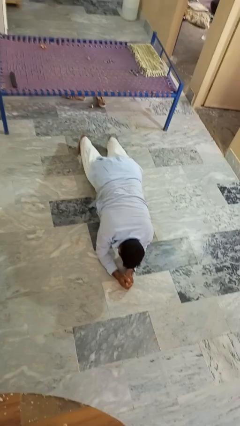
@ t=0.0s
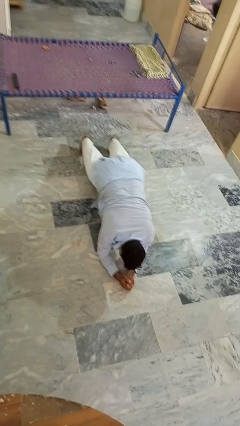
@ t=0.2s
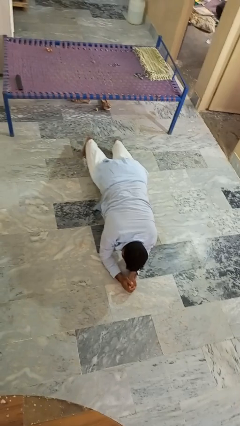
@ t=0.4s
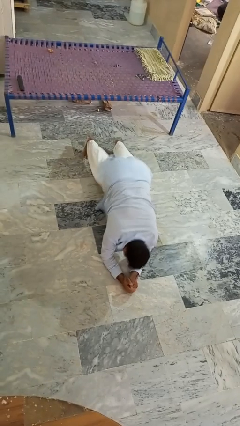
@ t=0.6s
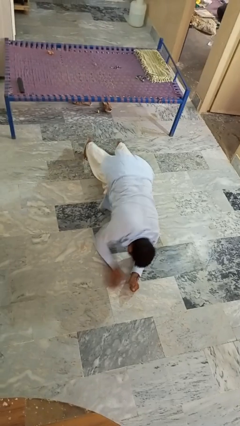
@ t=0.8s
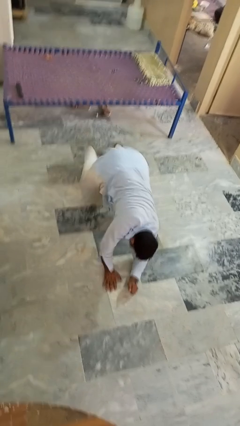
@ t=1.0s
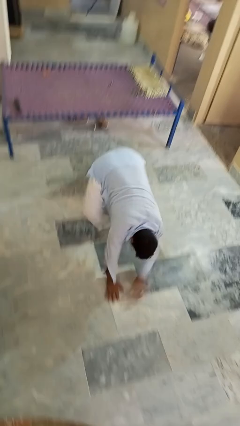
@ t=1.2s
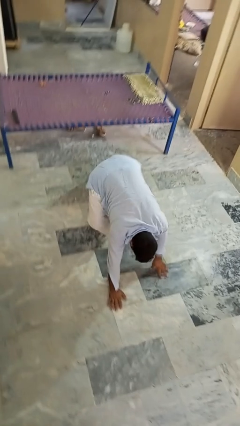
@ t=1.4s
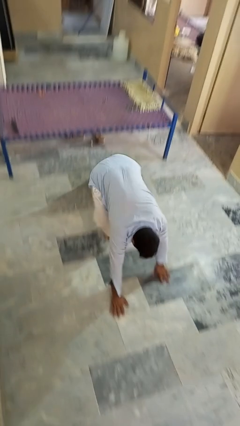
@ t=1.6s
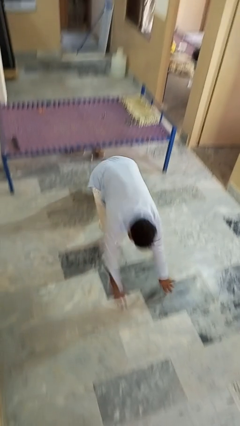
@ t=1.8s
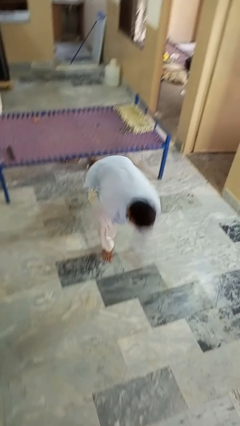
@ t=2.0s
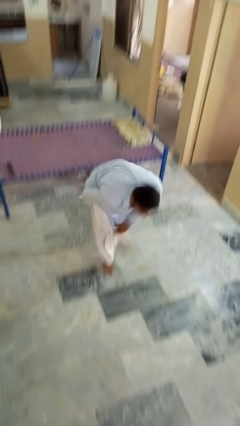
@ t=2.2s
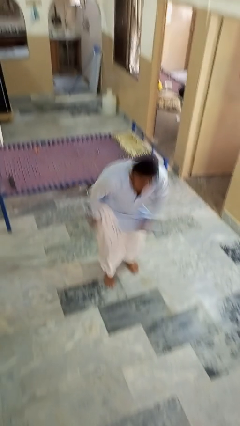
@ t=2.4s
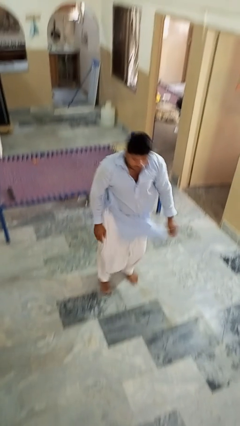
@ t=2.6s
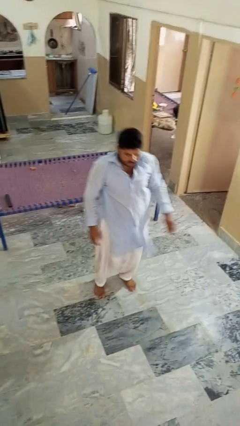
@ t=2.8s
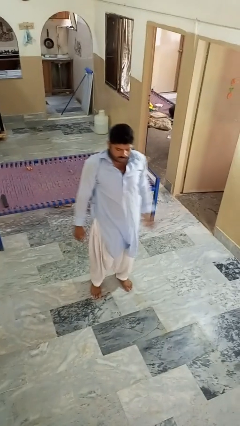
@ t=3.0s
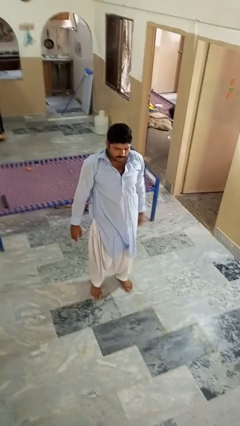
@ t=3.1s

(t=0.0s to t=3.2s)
person stands up from floor

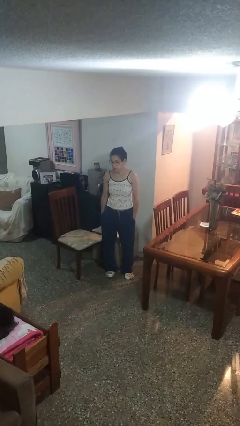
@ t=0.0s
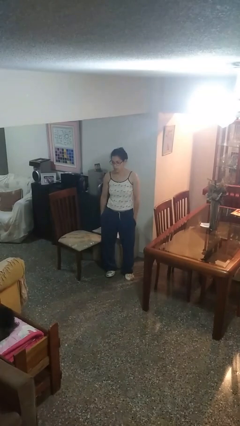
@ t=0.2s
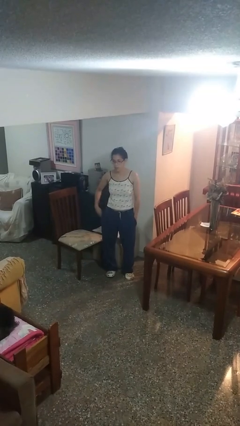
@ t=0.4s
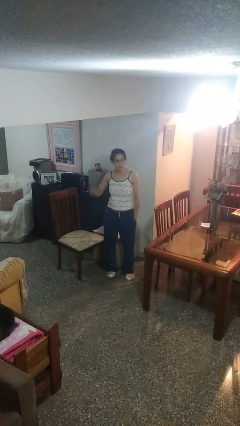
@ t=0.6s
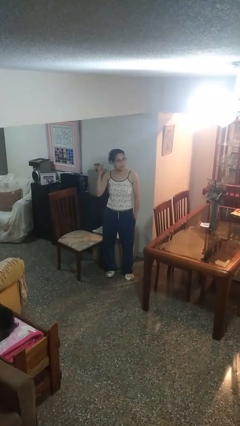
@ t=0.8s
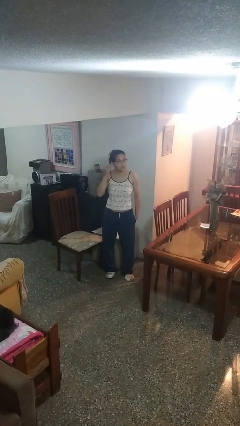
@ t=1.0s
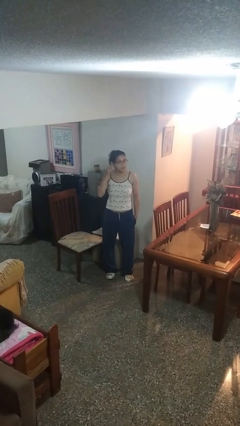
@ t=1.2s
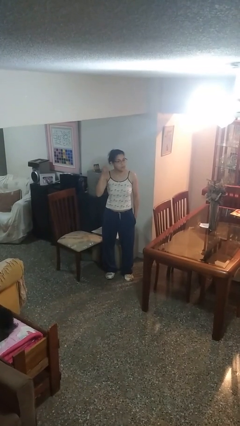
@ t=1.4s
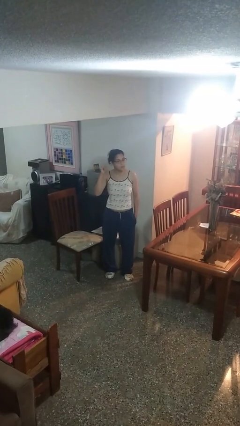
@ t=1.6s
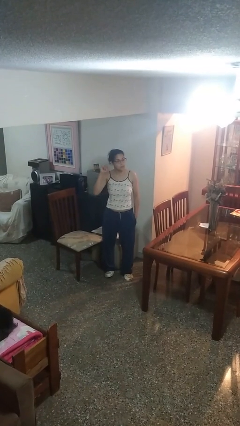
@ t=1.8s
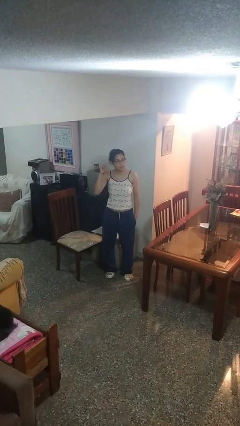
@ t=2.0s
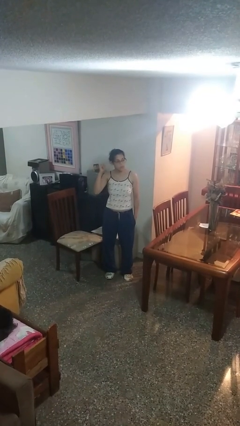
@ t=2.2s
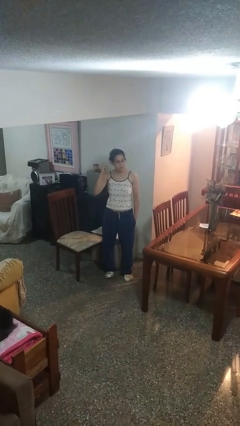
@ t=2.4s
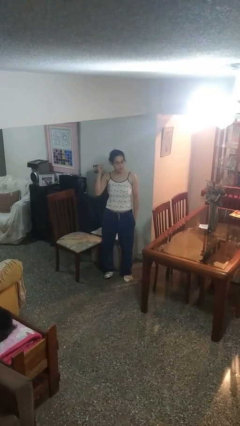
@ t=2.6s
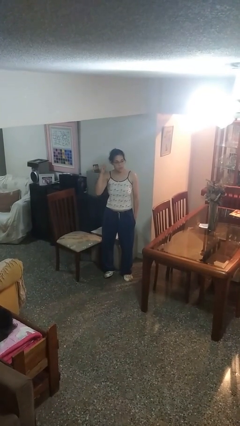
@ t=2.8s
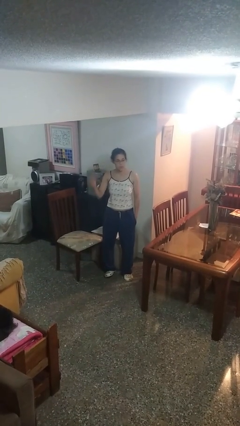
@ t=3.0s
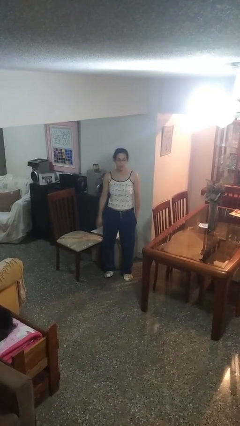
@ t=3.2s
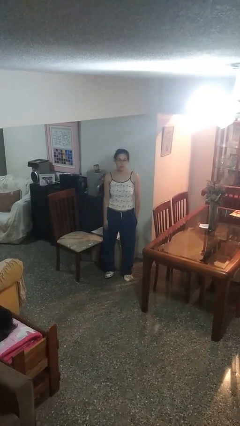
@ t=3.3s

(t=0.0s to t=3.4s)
person gestures listen closely

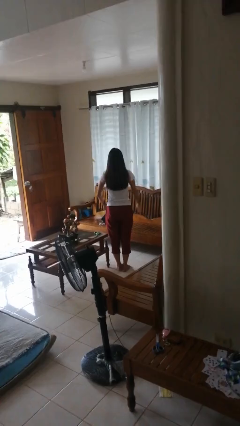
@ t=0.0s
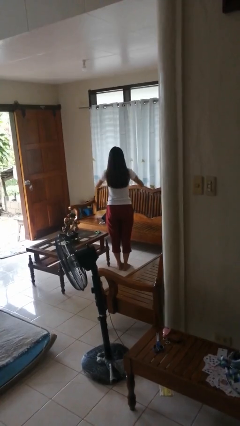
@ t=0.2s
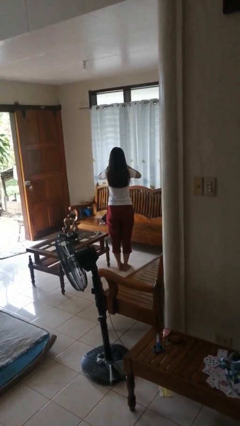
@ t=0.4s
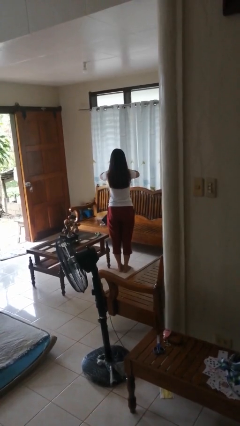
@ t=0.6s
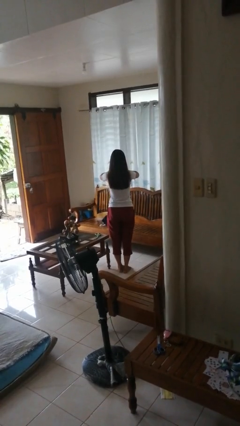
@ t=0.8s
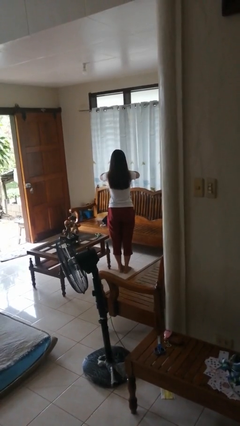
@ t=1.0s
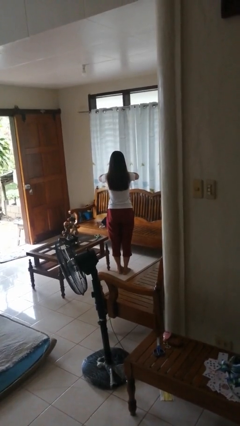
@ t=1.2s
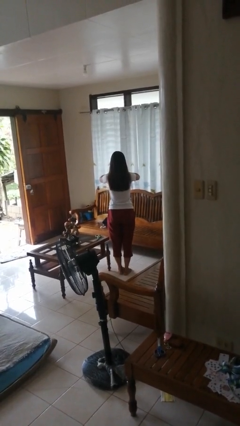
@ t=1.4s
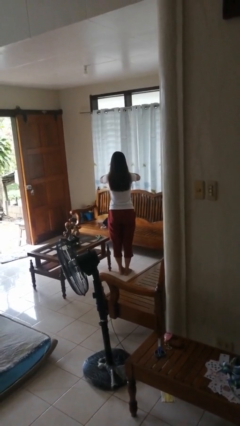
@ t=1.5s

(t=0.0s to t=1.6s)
person covers face with hands

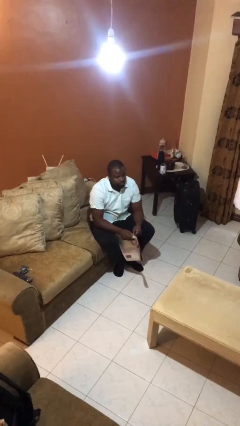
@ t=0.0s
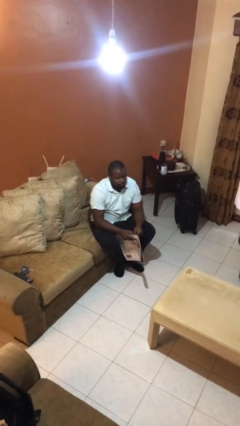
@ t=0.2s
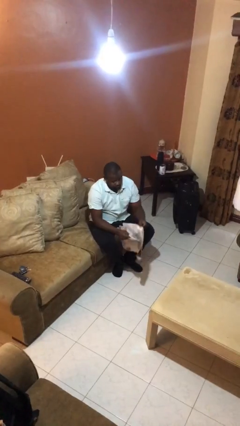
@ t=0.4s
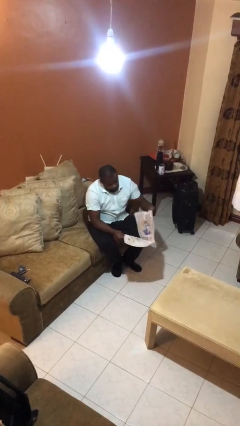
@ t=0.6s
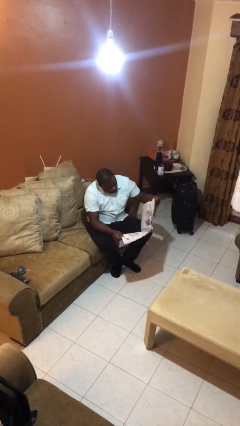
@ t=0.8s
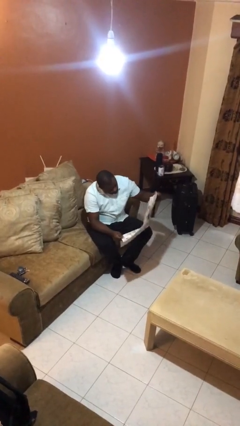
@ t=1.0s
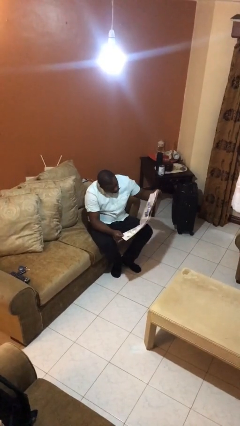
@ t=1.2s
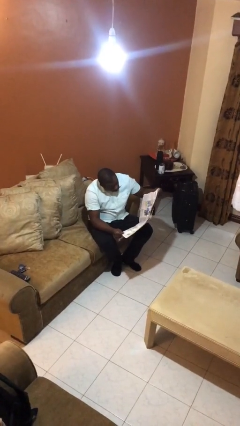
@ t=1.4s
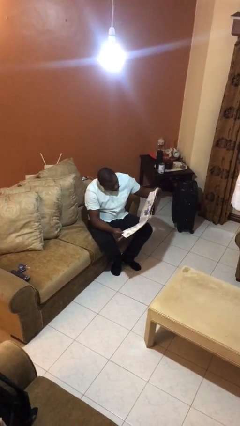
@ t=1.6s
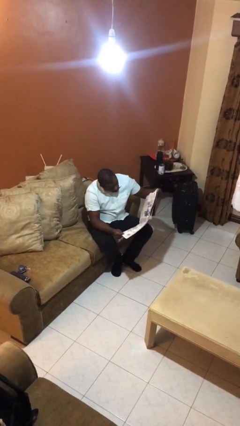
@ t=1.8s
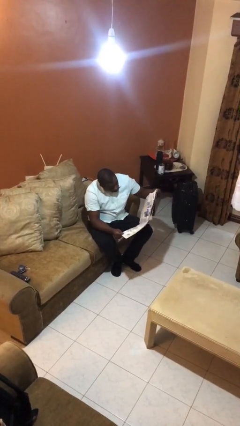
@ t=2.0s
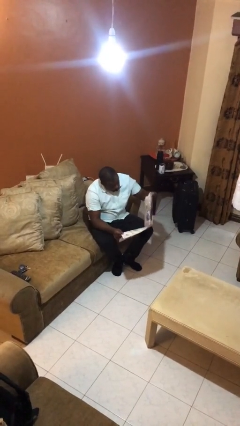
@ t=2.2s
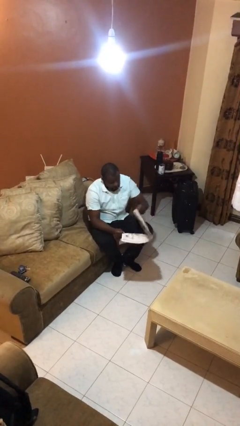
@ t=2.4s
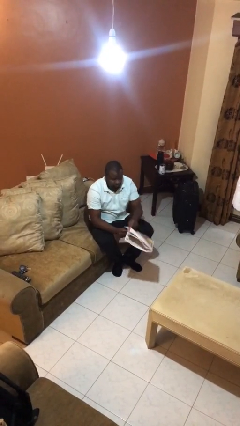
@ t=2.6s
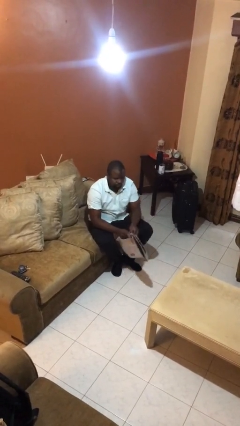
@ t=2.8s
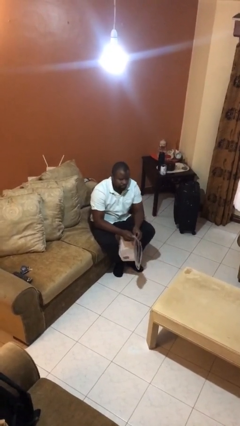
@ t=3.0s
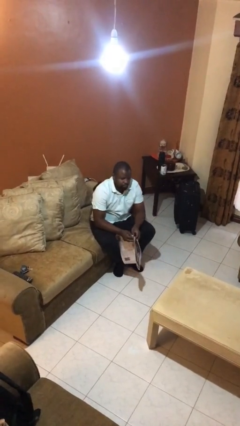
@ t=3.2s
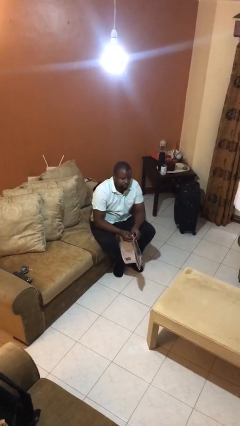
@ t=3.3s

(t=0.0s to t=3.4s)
person reads newspaper

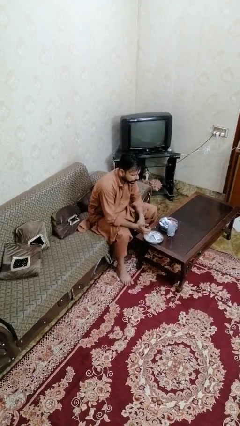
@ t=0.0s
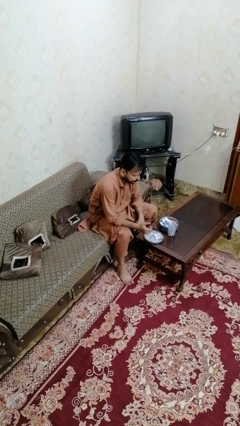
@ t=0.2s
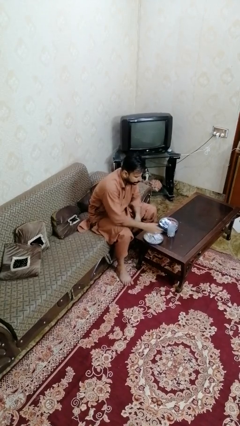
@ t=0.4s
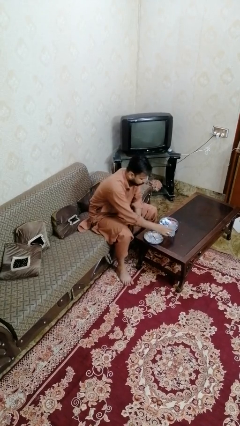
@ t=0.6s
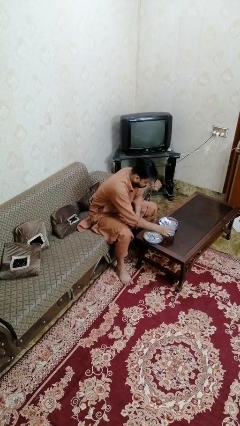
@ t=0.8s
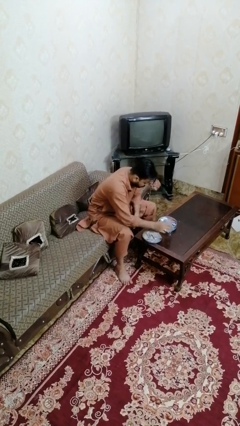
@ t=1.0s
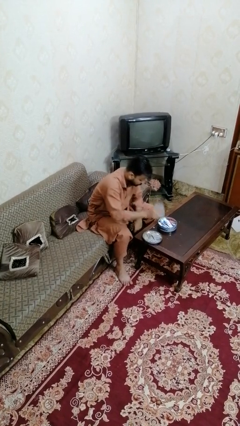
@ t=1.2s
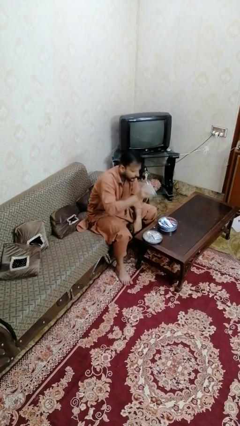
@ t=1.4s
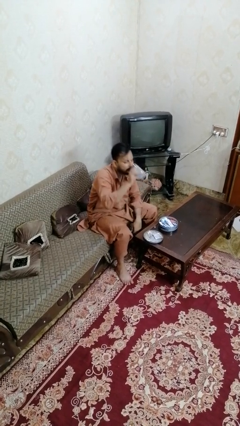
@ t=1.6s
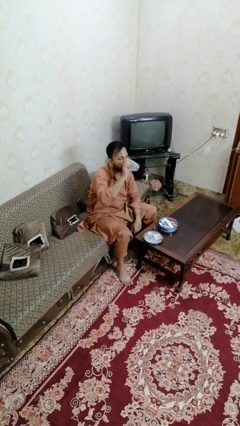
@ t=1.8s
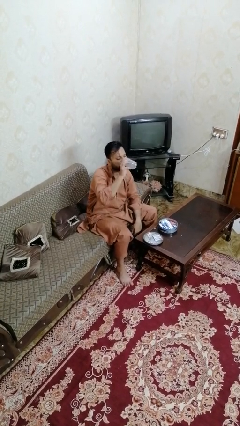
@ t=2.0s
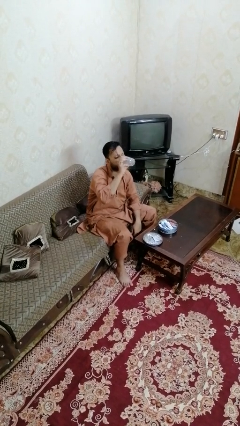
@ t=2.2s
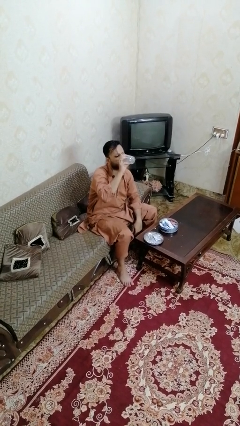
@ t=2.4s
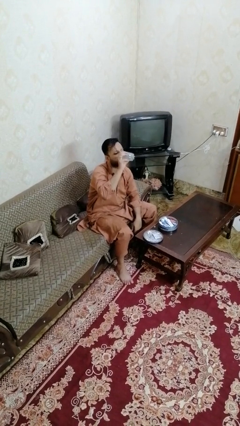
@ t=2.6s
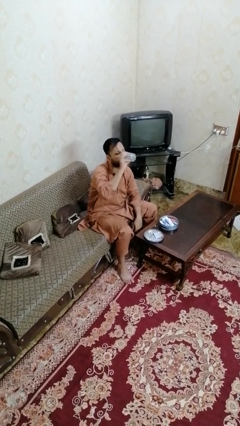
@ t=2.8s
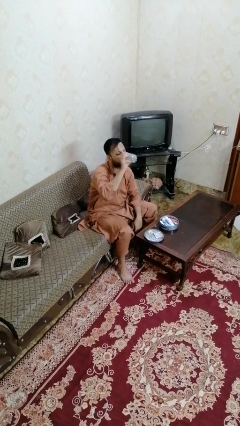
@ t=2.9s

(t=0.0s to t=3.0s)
person drinks from cup

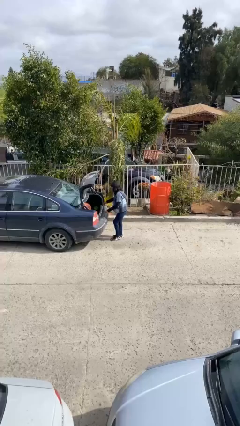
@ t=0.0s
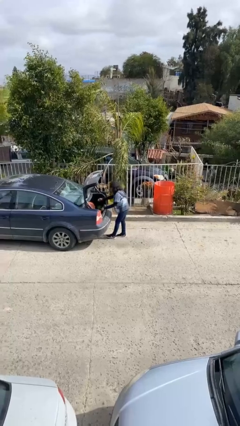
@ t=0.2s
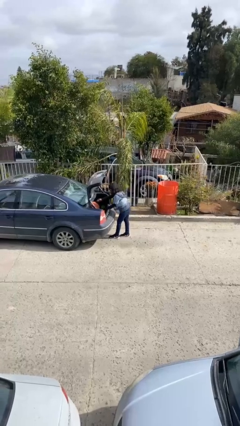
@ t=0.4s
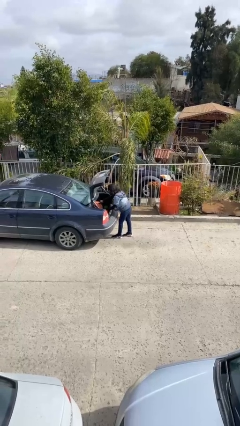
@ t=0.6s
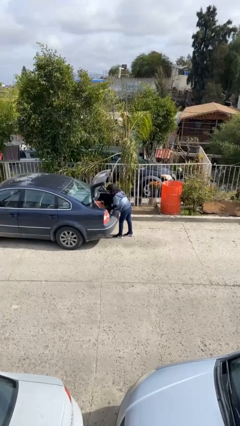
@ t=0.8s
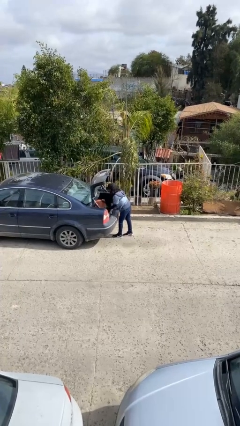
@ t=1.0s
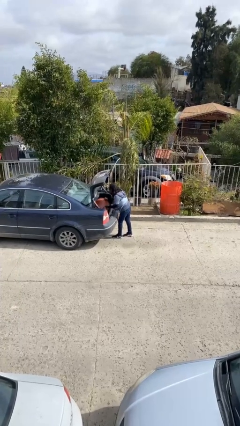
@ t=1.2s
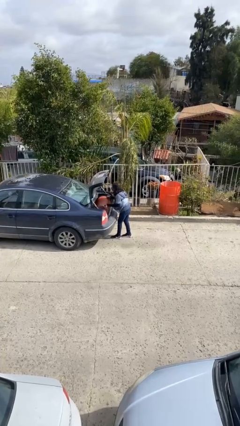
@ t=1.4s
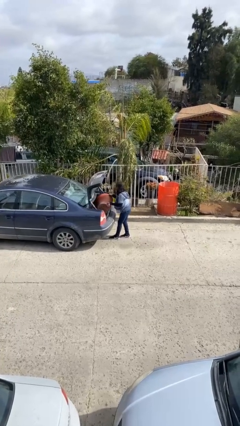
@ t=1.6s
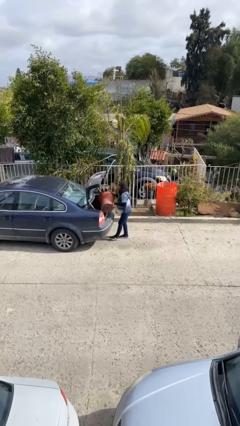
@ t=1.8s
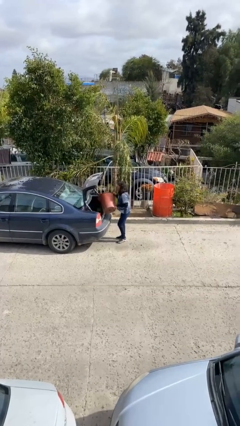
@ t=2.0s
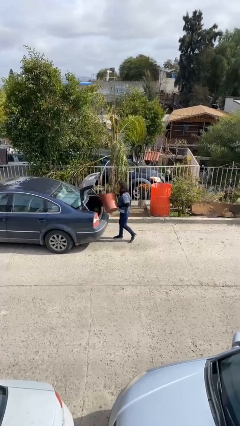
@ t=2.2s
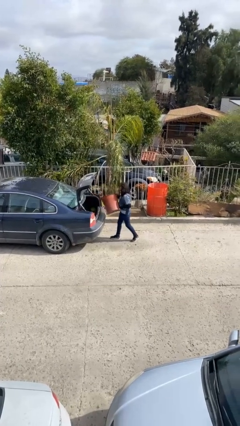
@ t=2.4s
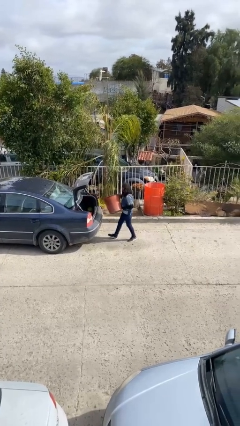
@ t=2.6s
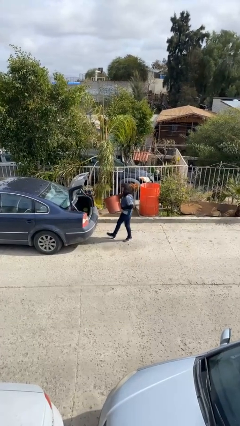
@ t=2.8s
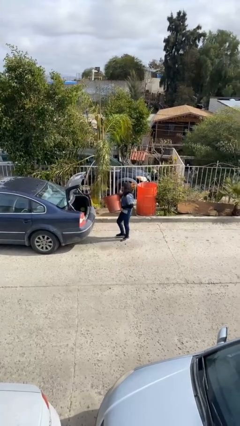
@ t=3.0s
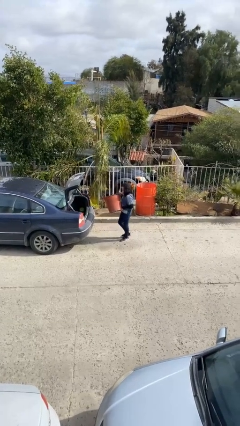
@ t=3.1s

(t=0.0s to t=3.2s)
person unloads car
